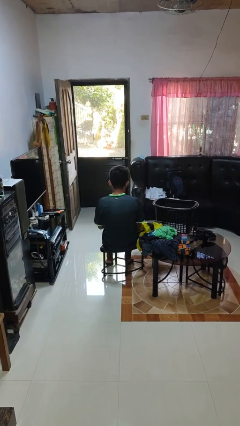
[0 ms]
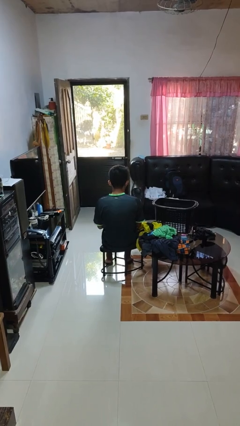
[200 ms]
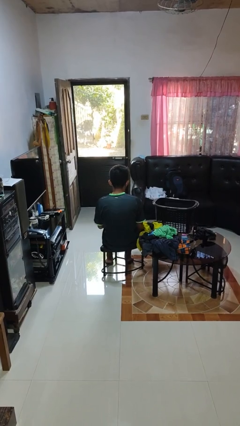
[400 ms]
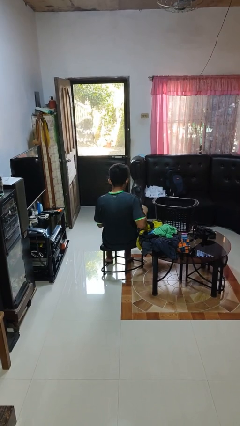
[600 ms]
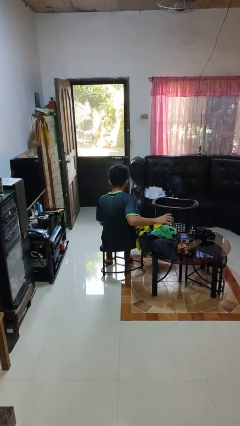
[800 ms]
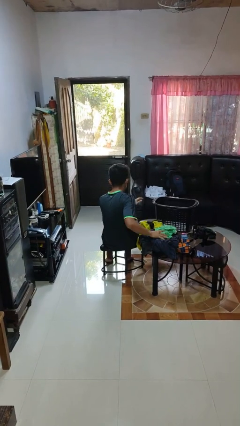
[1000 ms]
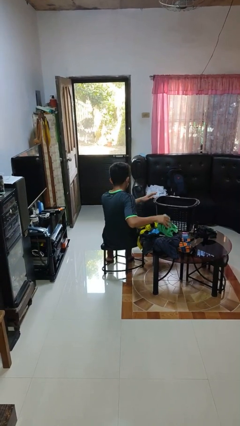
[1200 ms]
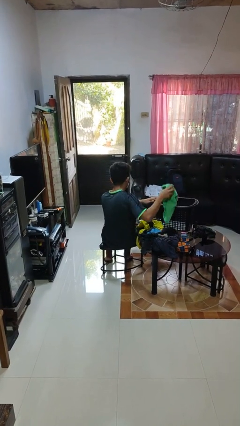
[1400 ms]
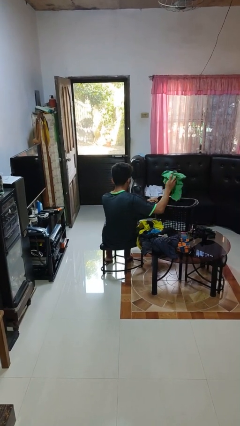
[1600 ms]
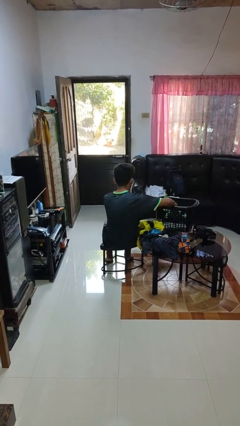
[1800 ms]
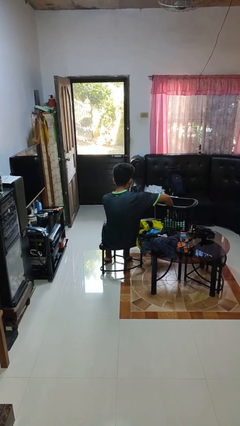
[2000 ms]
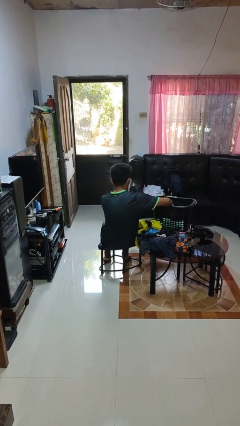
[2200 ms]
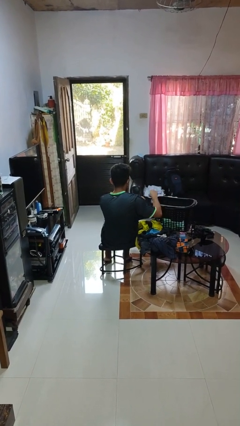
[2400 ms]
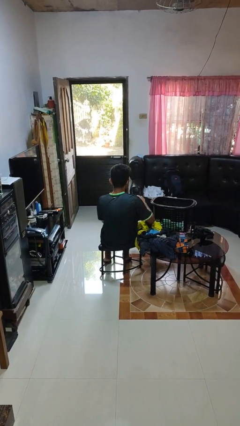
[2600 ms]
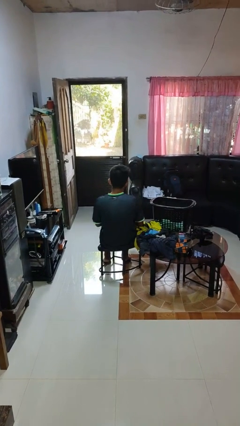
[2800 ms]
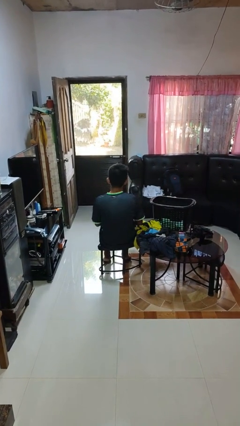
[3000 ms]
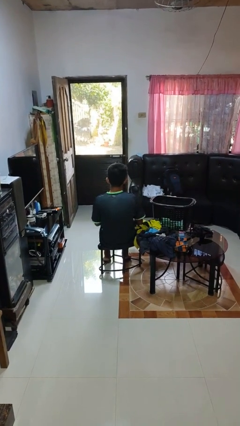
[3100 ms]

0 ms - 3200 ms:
person puts object into basket

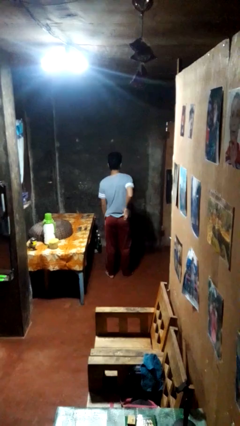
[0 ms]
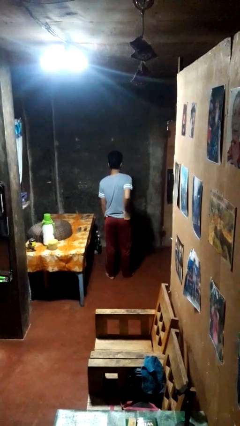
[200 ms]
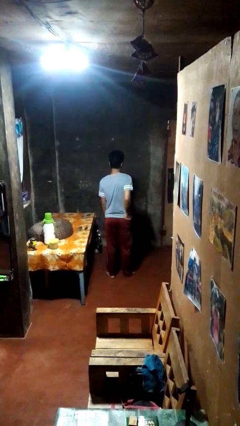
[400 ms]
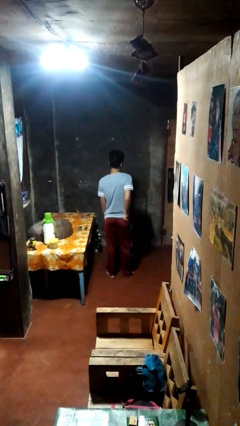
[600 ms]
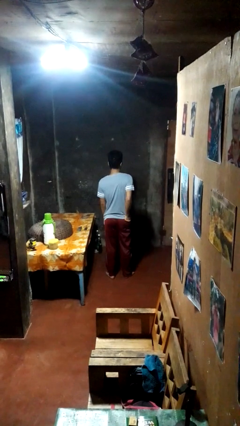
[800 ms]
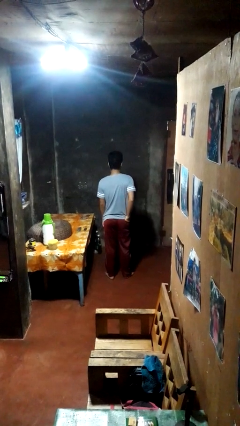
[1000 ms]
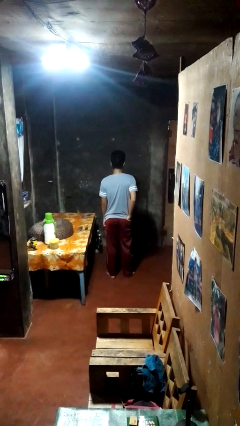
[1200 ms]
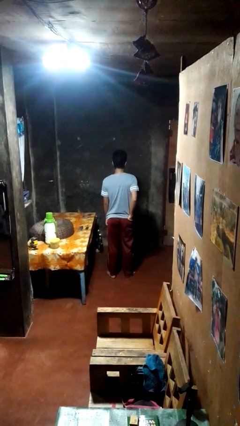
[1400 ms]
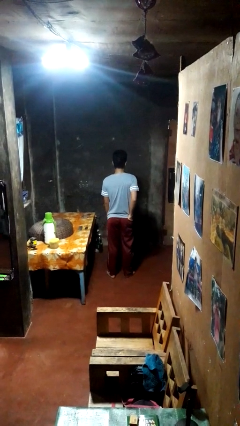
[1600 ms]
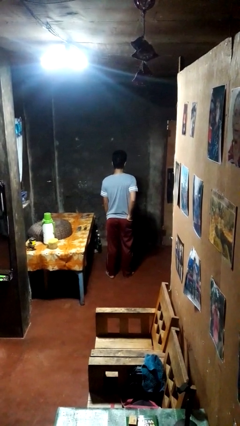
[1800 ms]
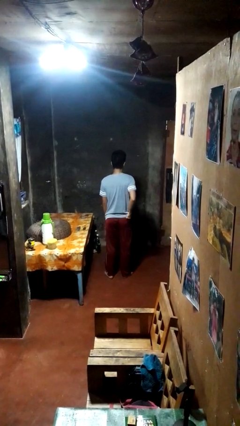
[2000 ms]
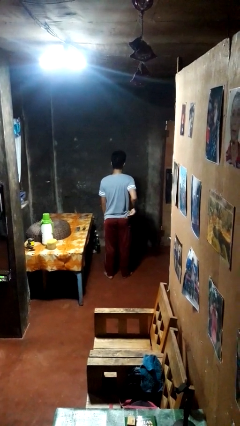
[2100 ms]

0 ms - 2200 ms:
person puts hands in back pockets

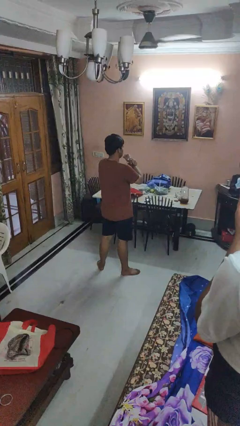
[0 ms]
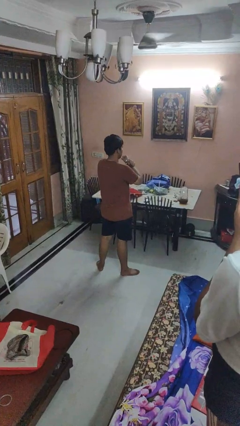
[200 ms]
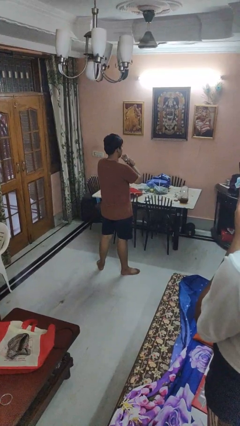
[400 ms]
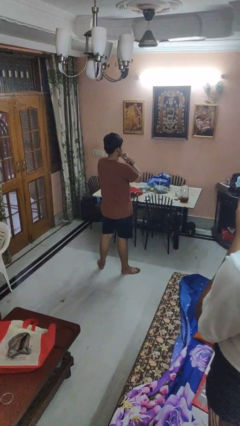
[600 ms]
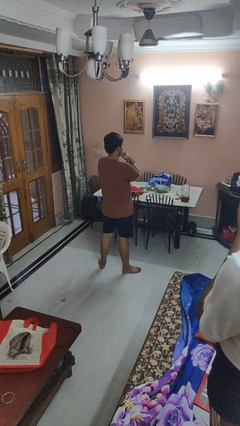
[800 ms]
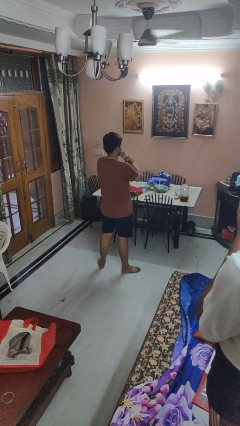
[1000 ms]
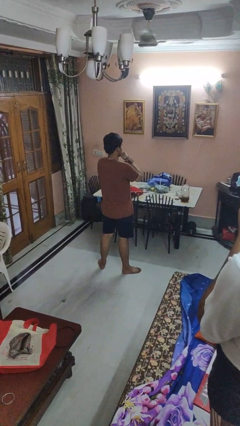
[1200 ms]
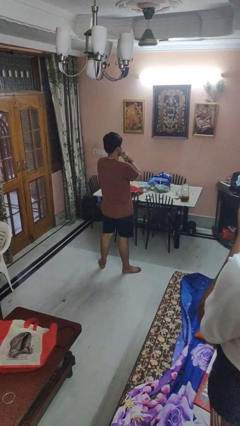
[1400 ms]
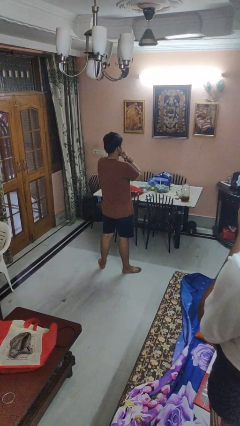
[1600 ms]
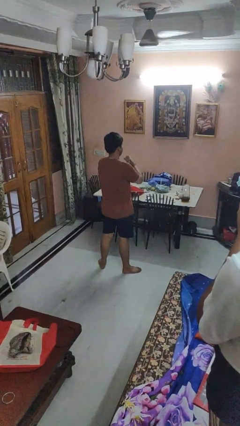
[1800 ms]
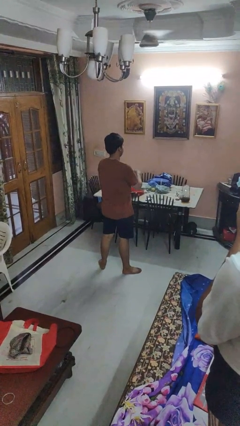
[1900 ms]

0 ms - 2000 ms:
person gestures arms x

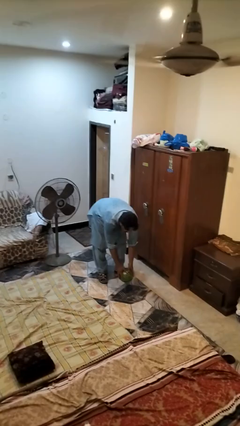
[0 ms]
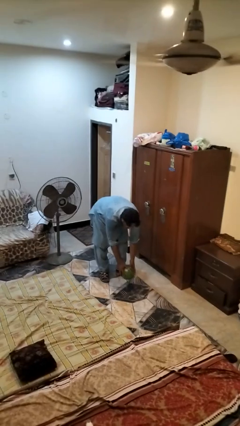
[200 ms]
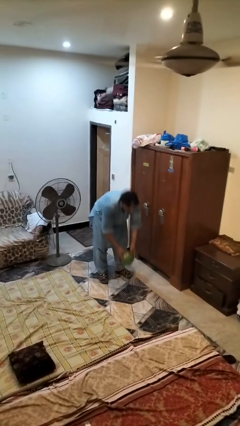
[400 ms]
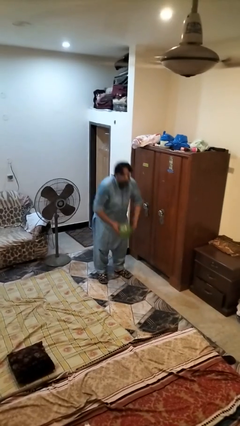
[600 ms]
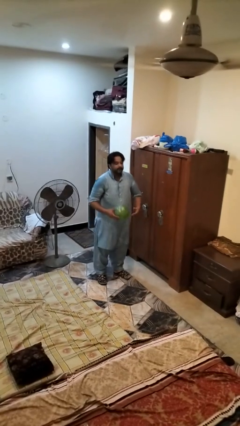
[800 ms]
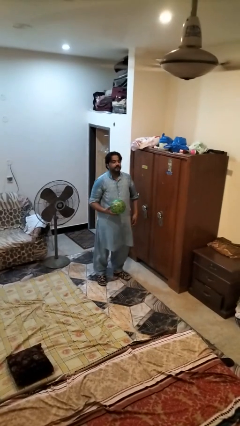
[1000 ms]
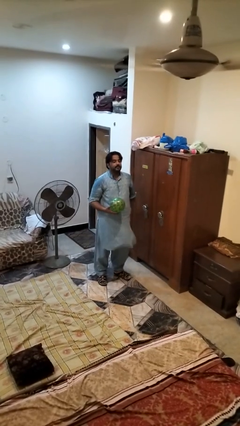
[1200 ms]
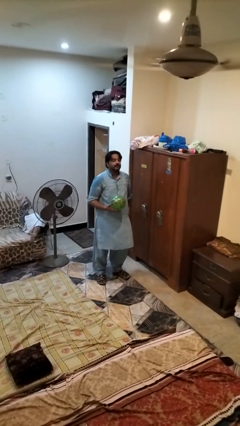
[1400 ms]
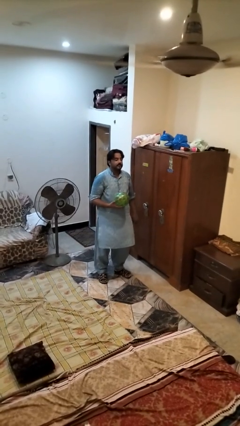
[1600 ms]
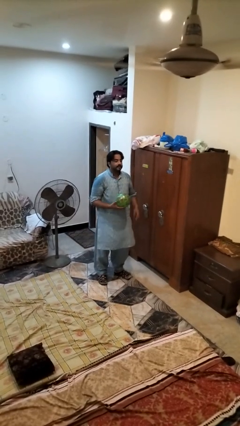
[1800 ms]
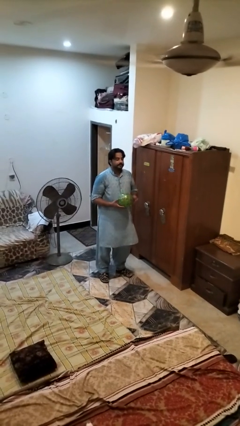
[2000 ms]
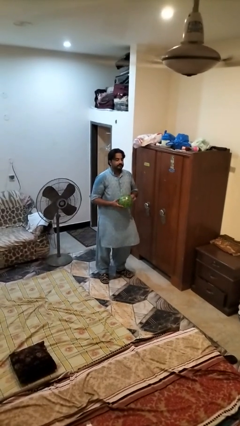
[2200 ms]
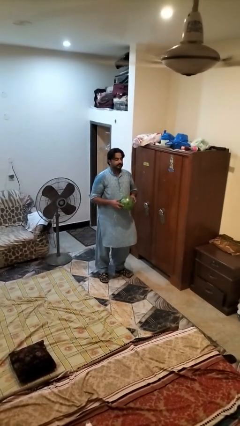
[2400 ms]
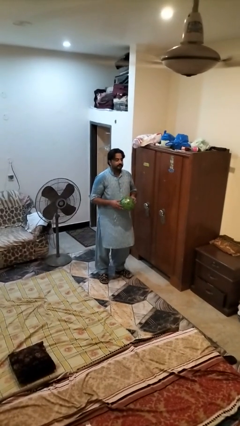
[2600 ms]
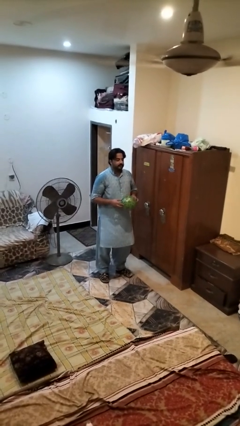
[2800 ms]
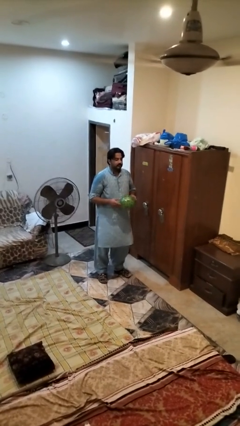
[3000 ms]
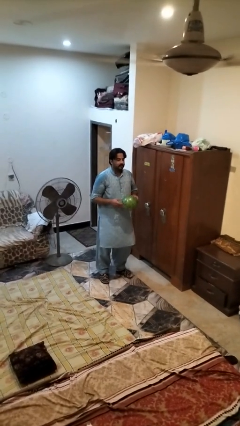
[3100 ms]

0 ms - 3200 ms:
person picks up object from floor

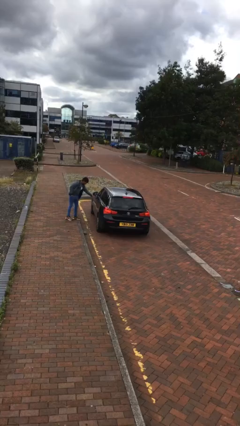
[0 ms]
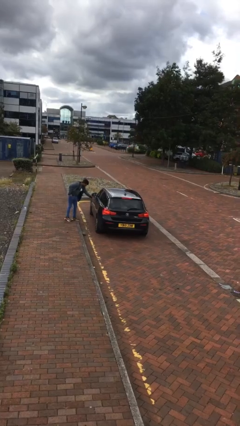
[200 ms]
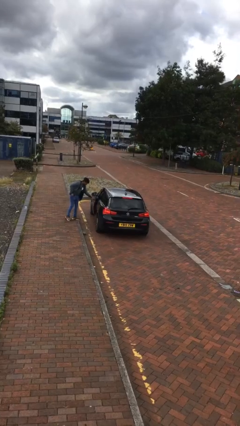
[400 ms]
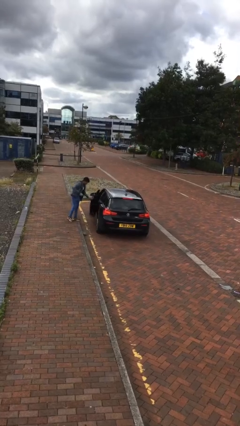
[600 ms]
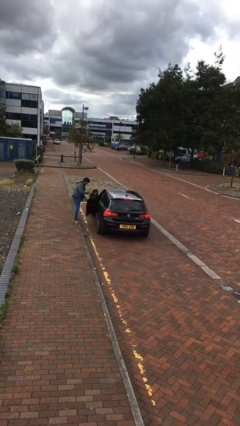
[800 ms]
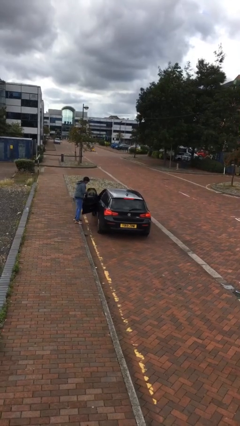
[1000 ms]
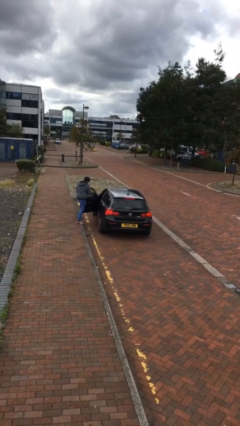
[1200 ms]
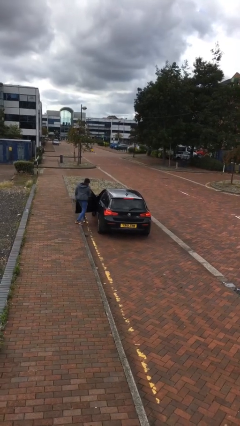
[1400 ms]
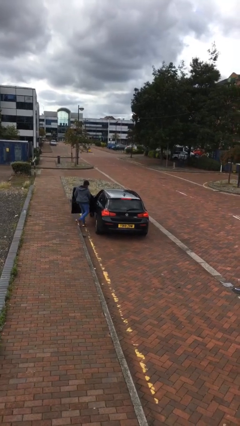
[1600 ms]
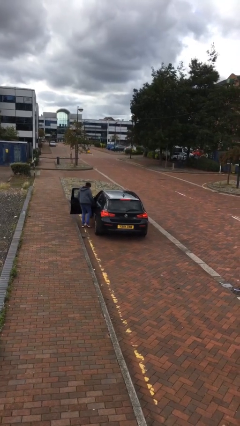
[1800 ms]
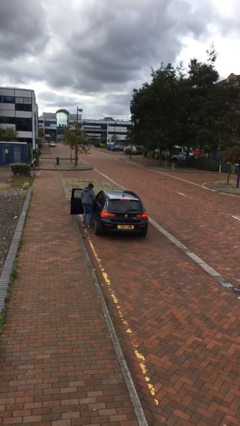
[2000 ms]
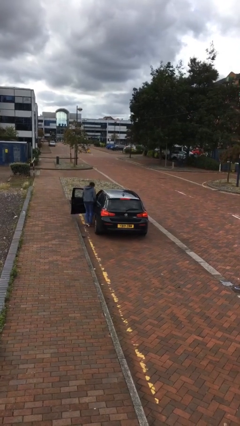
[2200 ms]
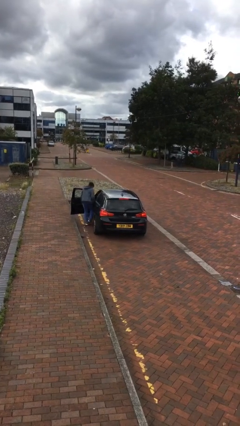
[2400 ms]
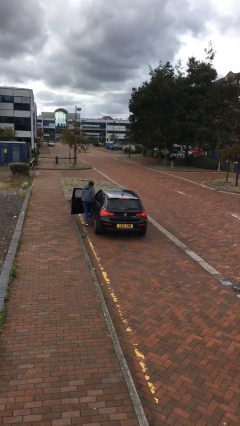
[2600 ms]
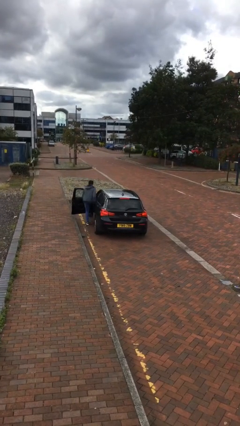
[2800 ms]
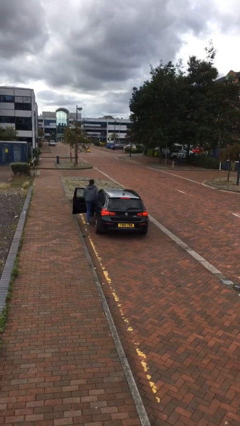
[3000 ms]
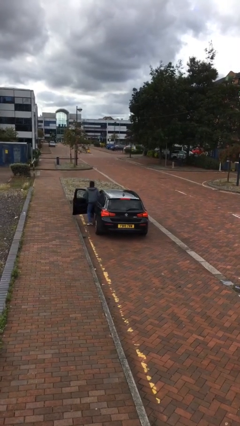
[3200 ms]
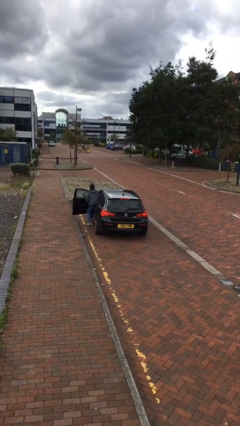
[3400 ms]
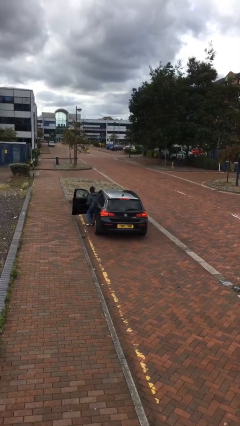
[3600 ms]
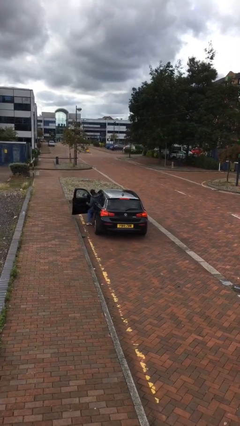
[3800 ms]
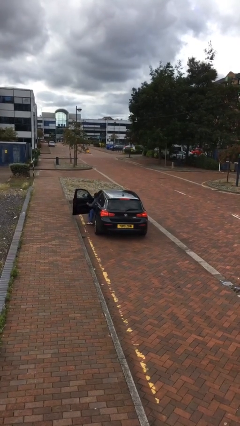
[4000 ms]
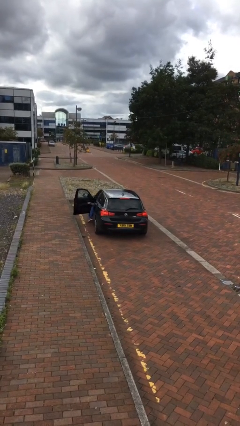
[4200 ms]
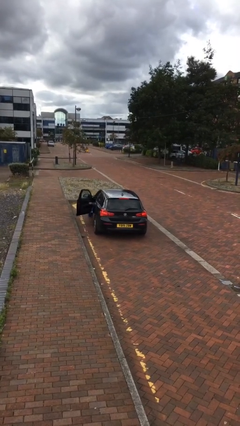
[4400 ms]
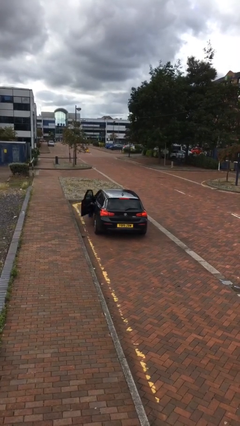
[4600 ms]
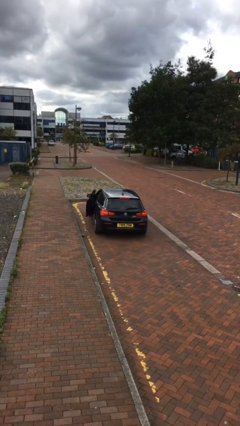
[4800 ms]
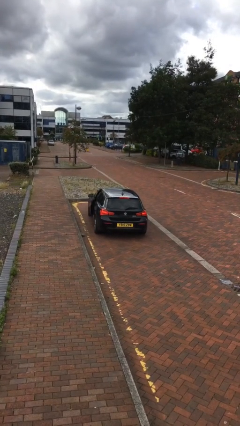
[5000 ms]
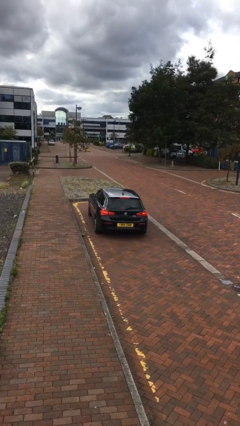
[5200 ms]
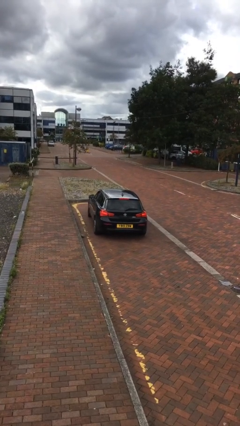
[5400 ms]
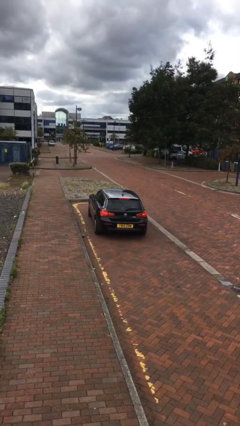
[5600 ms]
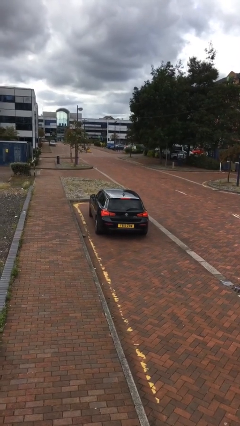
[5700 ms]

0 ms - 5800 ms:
car picks up person

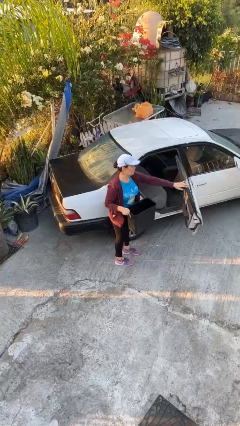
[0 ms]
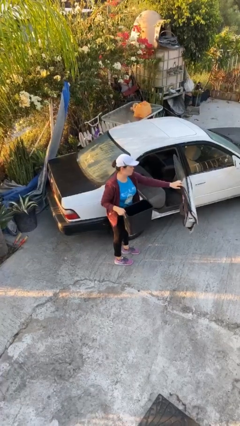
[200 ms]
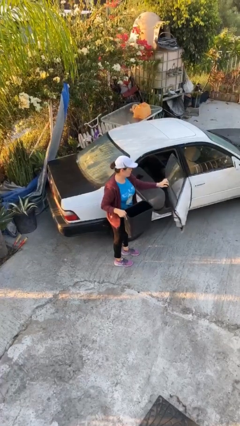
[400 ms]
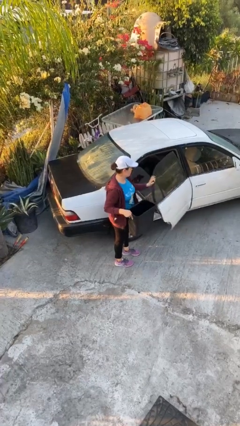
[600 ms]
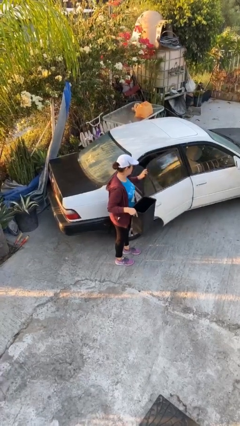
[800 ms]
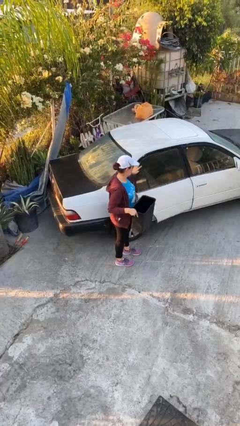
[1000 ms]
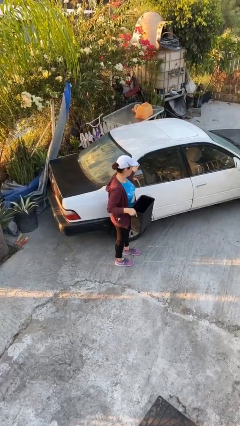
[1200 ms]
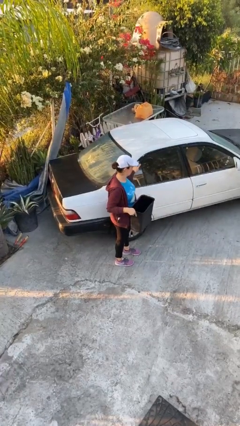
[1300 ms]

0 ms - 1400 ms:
person closes car door
